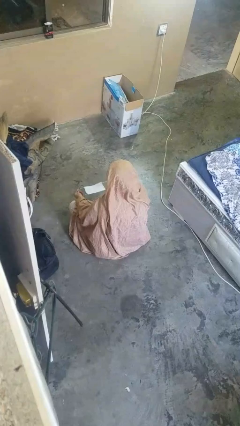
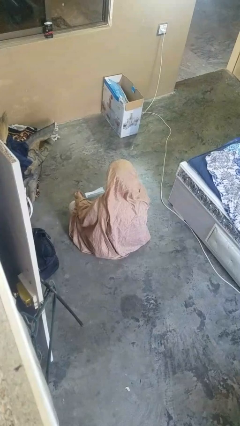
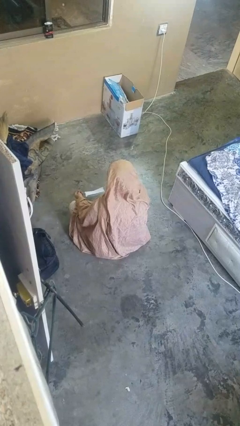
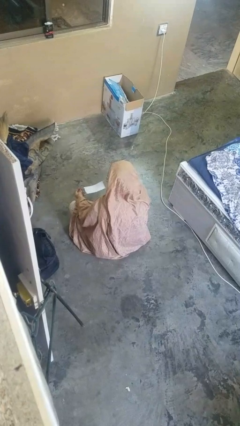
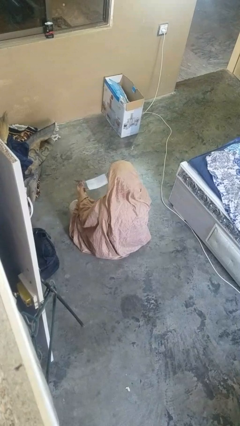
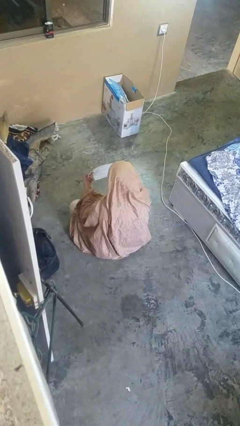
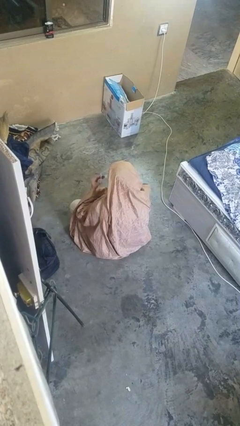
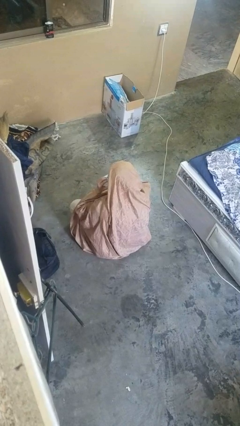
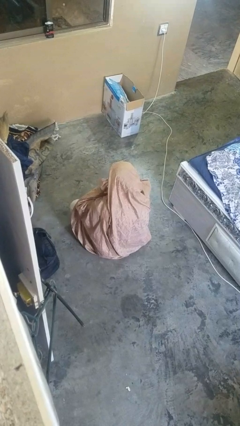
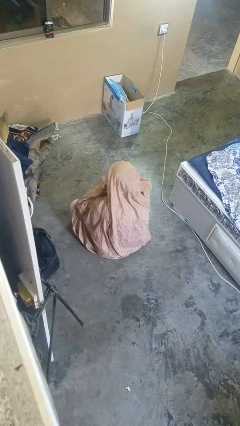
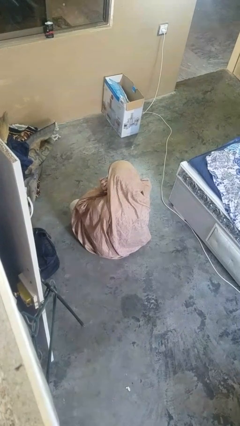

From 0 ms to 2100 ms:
person puts on facemask

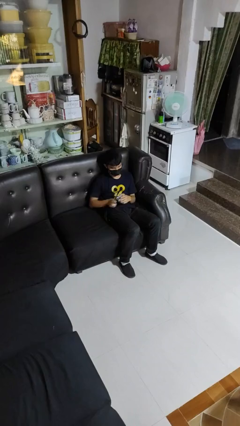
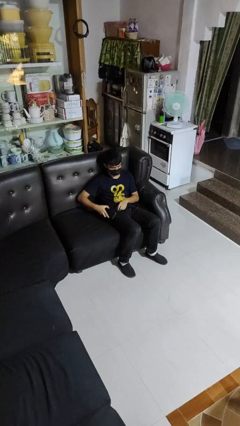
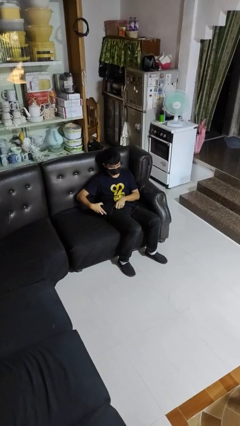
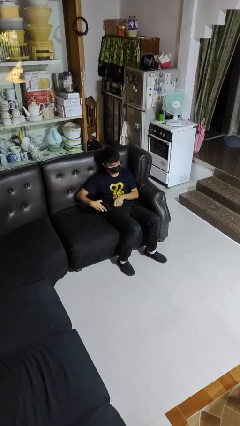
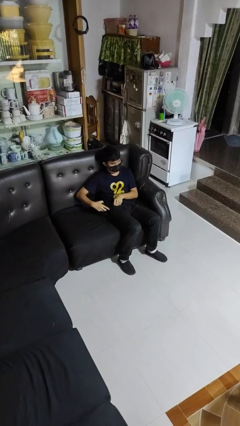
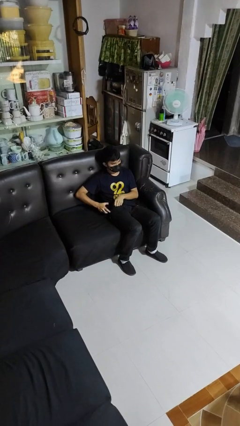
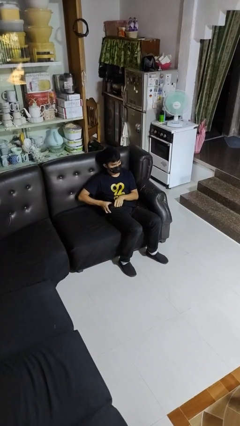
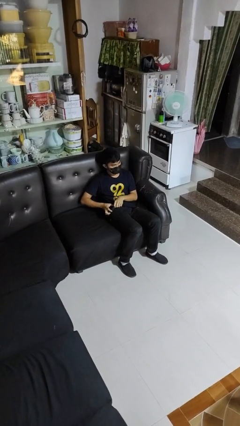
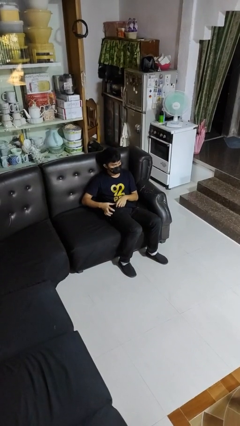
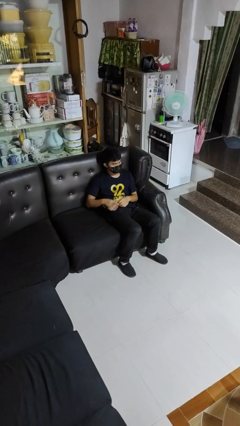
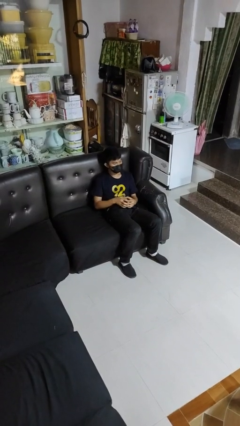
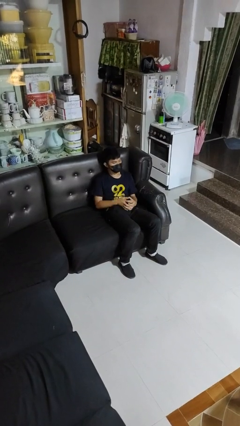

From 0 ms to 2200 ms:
person puts phone into pocket

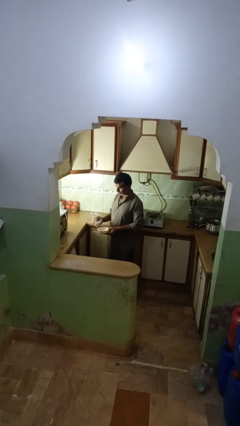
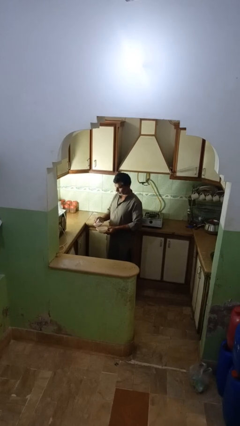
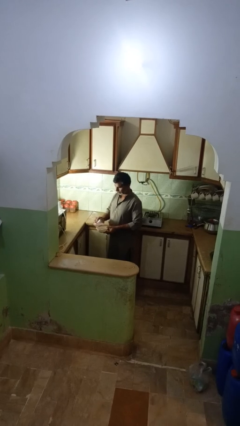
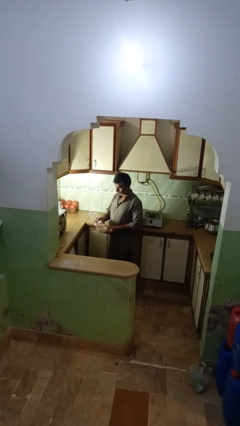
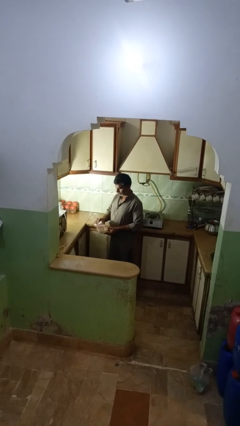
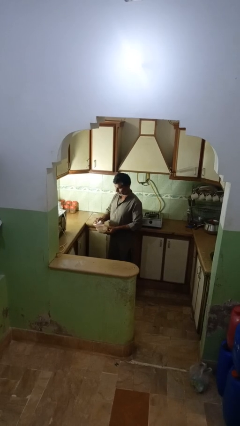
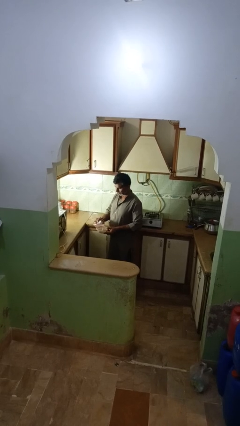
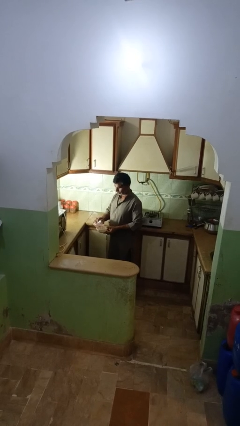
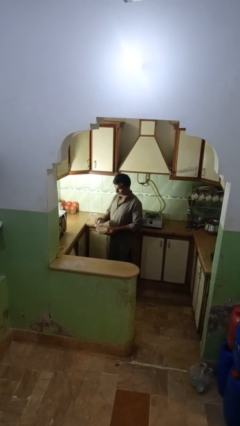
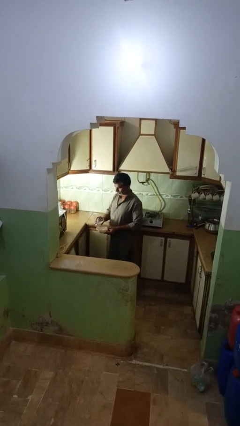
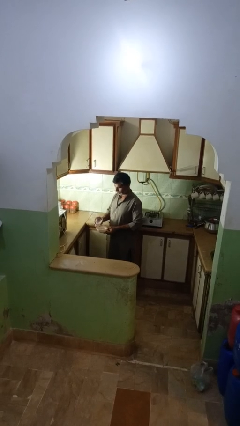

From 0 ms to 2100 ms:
person pours into bowl

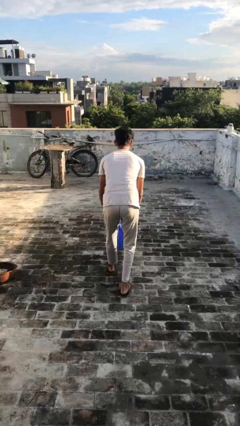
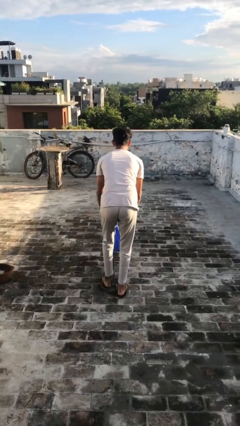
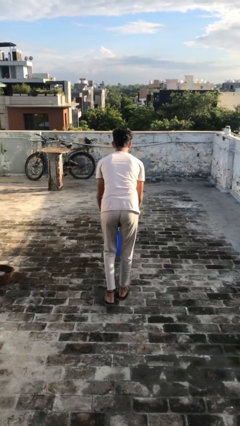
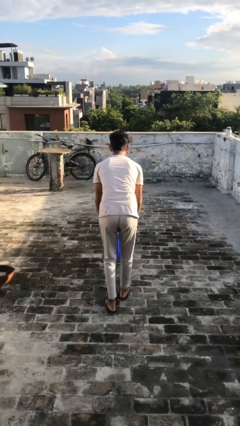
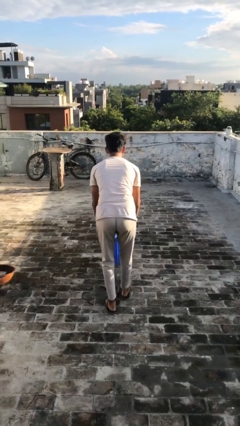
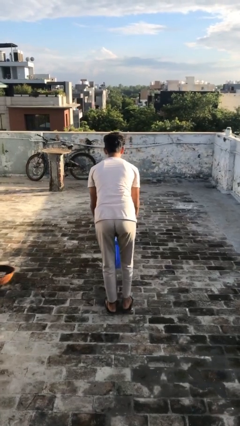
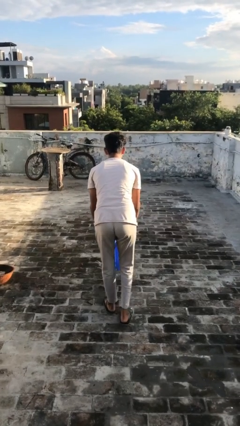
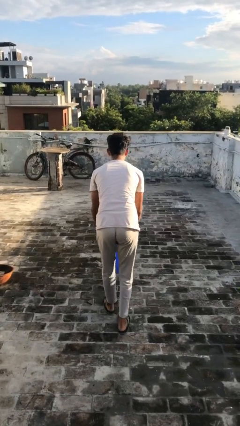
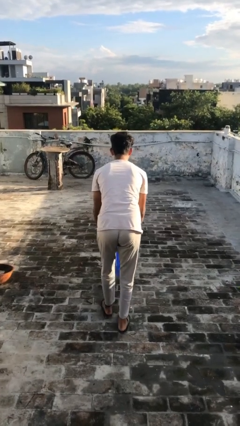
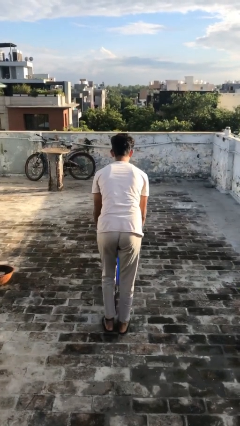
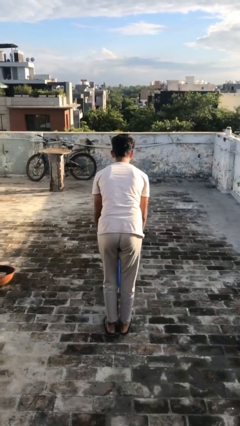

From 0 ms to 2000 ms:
person pulls wheeled trashcan

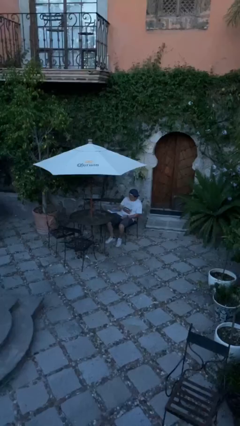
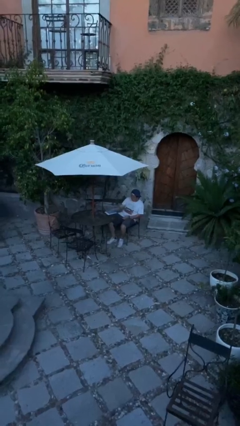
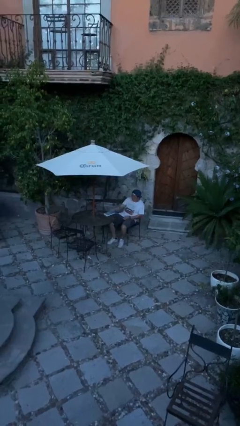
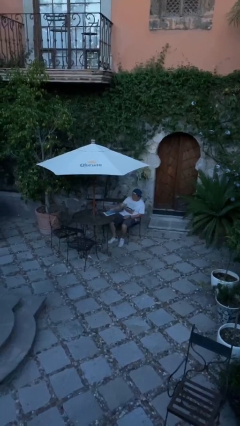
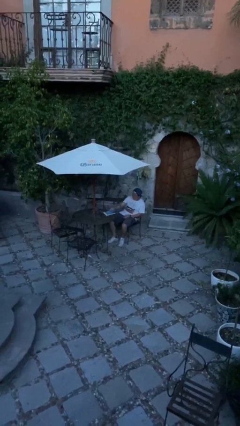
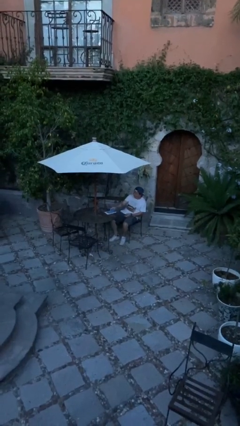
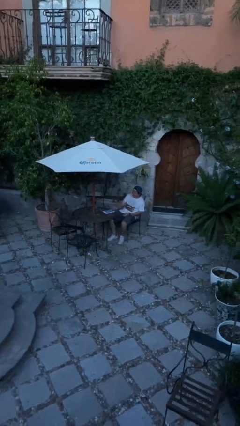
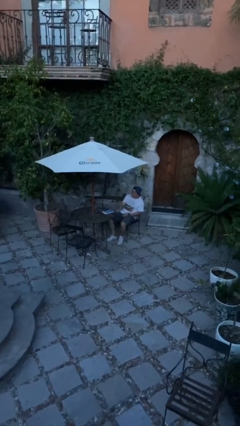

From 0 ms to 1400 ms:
person puts down object on table

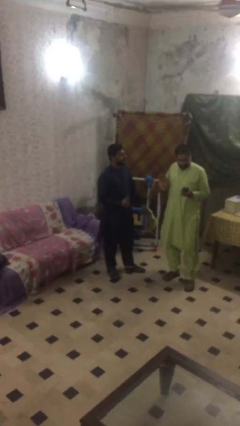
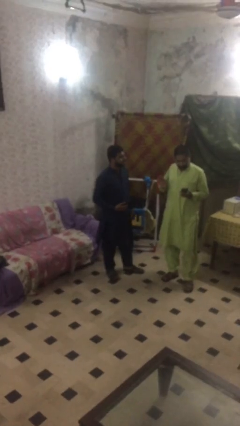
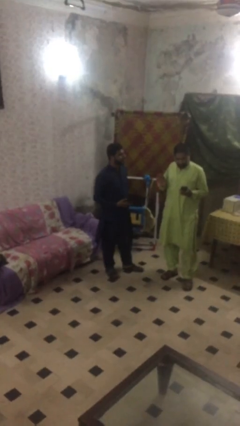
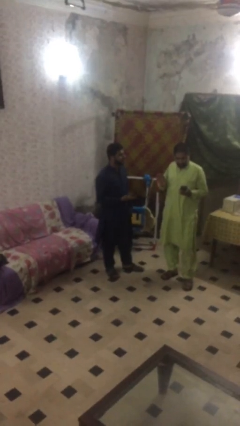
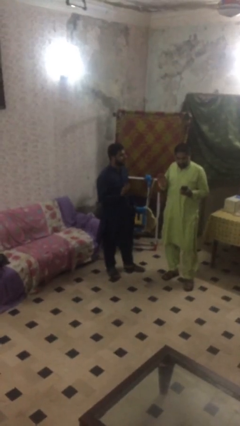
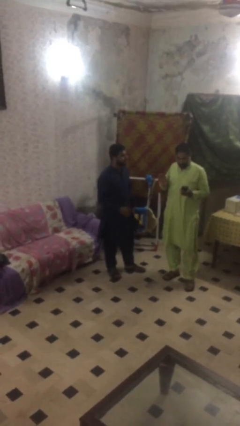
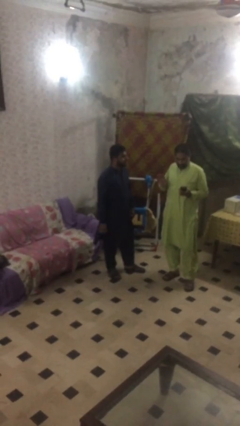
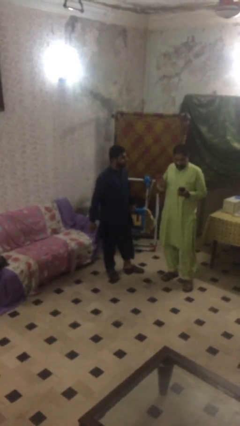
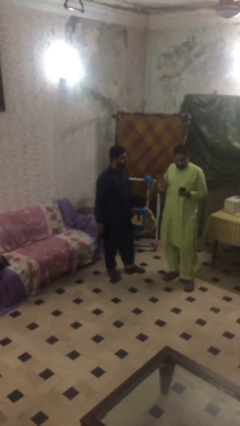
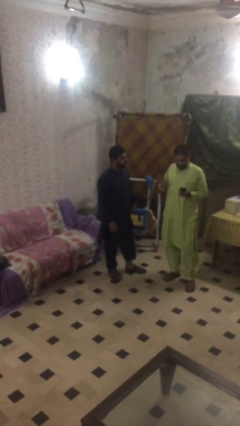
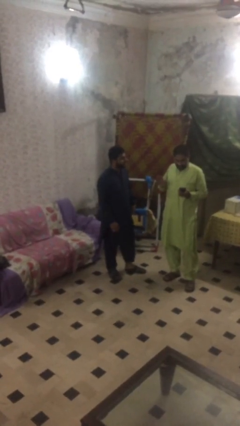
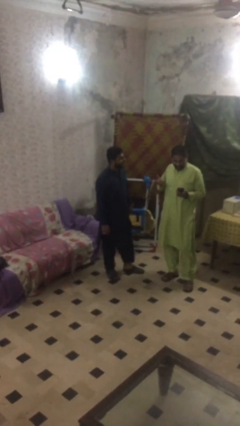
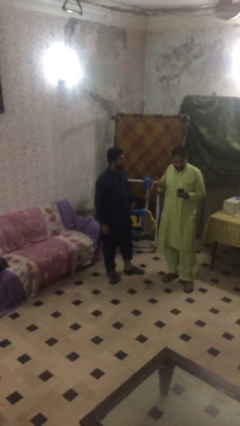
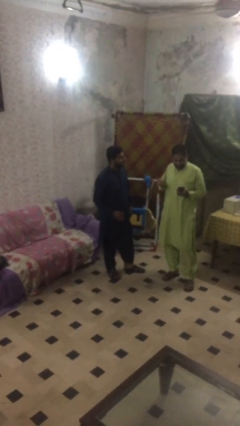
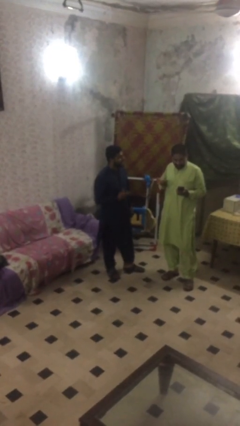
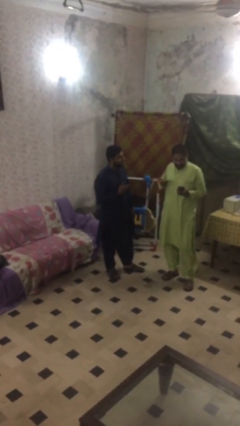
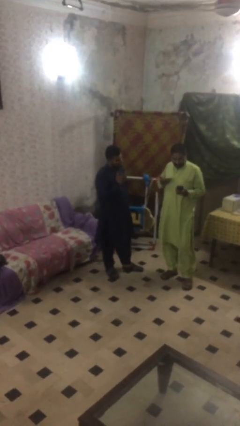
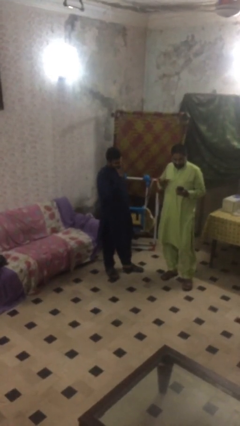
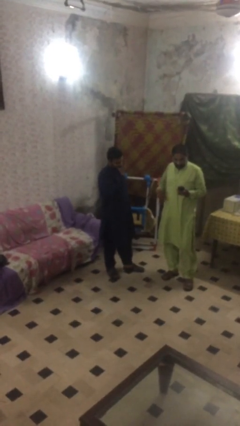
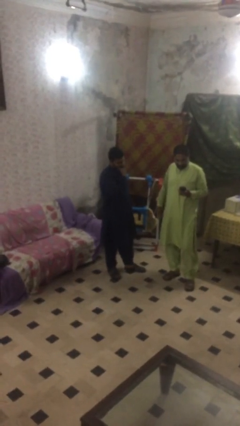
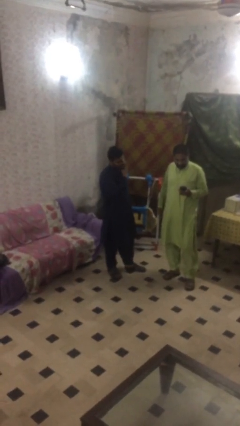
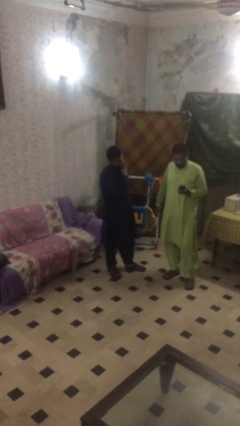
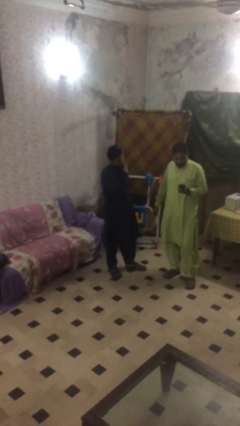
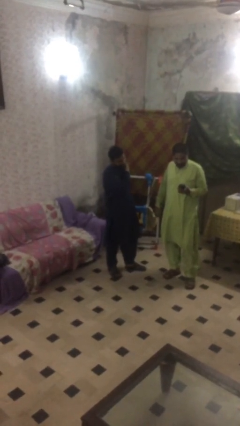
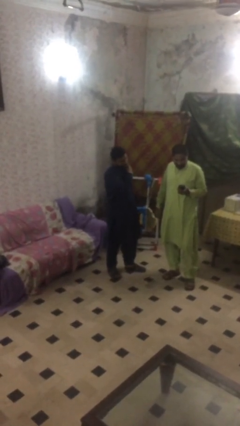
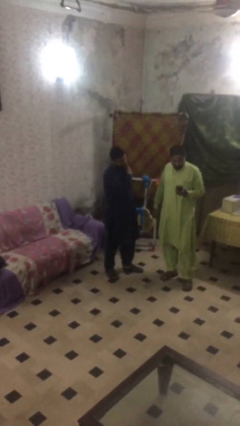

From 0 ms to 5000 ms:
person talks to person

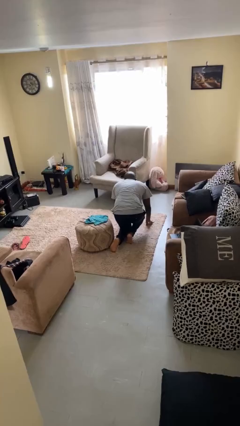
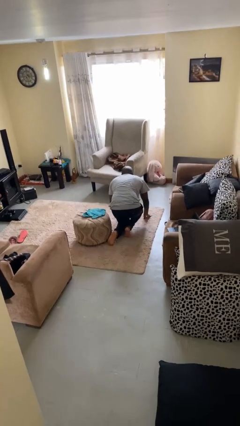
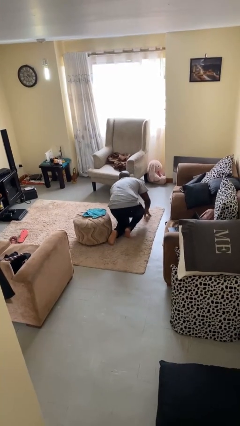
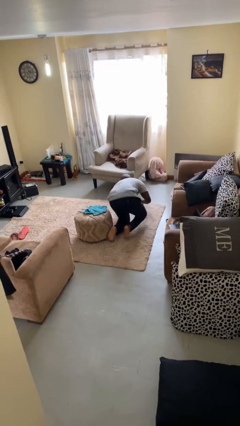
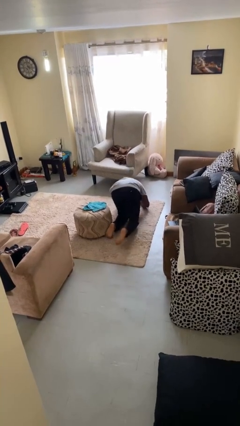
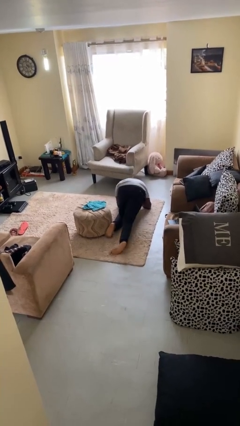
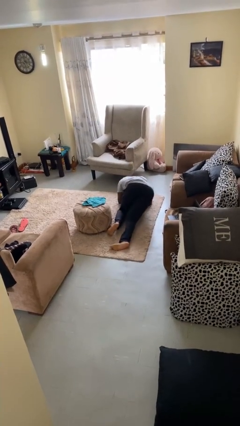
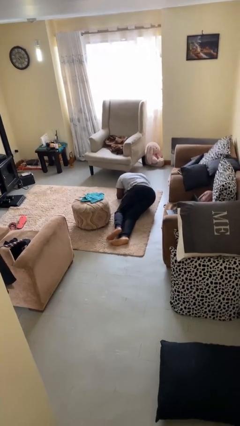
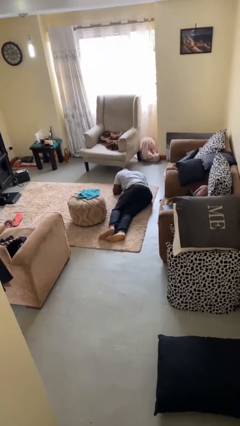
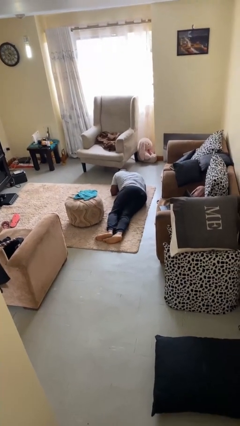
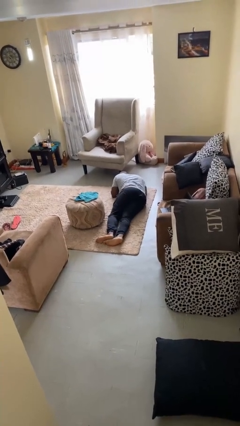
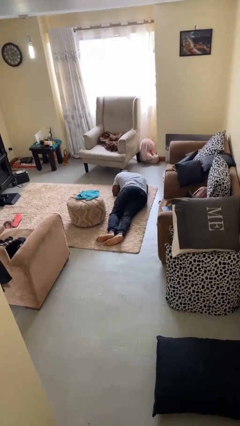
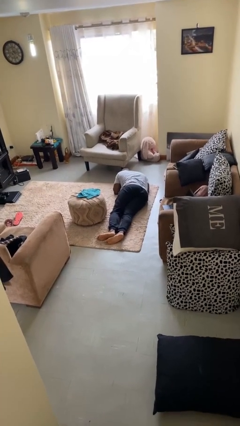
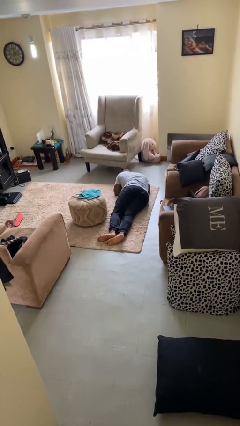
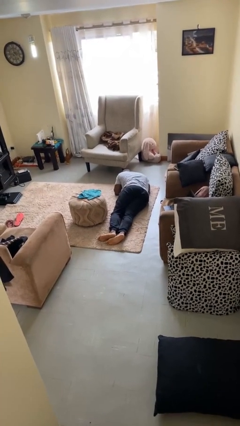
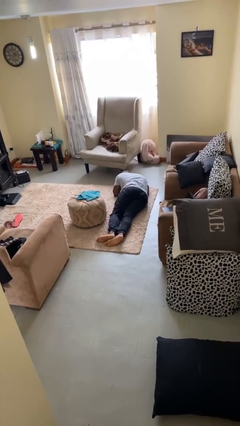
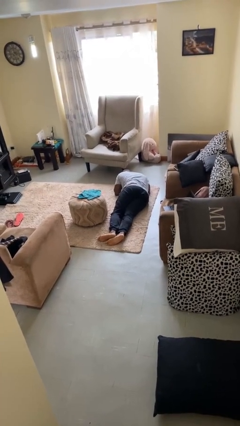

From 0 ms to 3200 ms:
person lies down on floor
